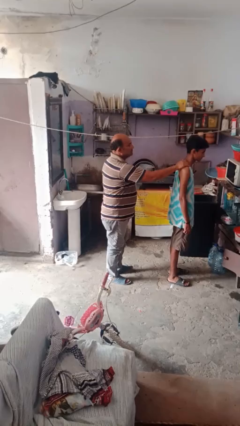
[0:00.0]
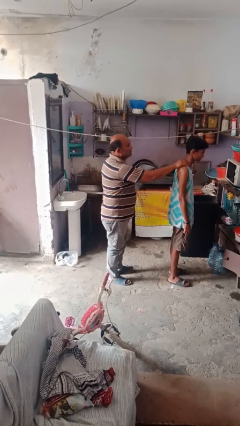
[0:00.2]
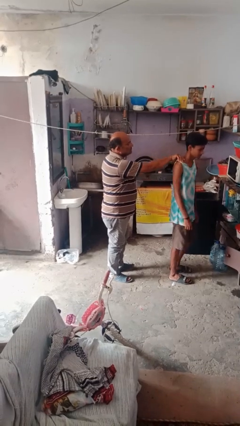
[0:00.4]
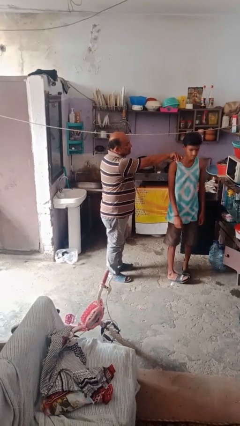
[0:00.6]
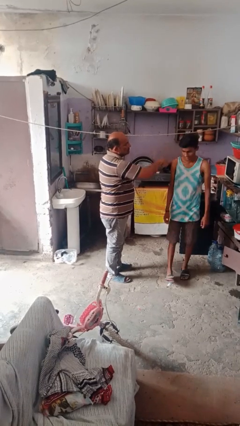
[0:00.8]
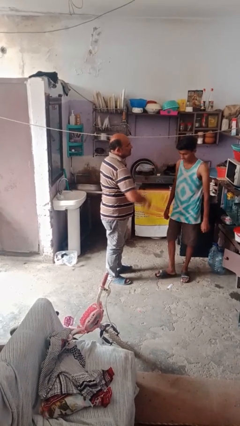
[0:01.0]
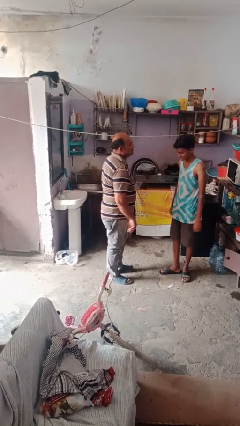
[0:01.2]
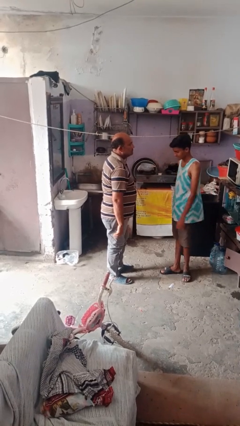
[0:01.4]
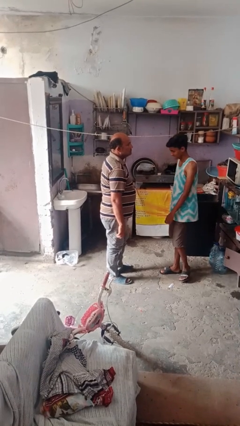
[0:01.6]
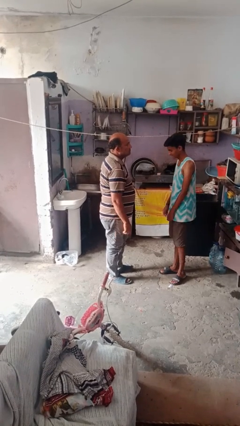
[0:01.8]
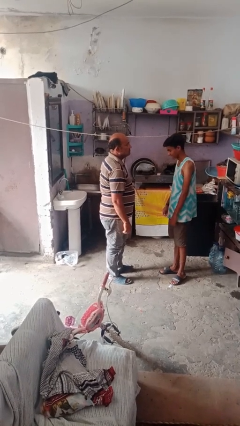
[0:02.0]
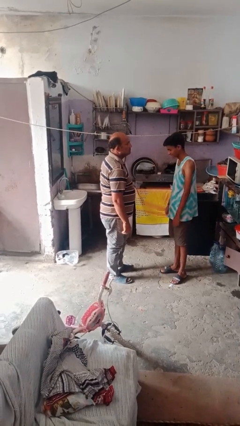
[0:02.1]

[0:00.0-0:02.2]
person spins person around

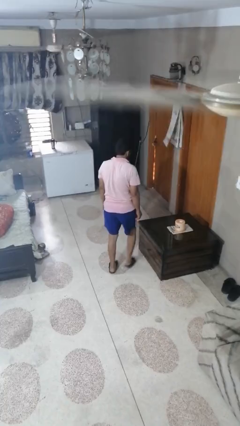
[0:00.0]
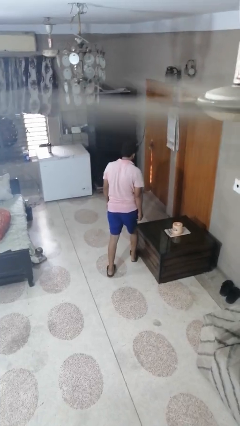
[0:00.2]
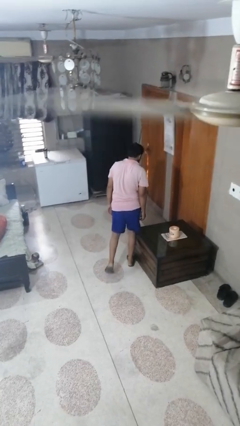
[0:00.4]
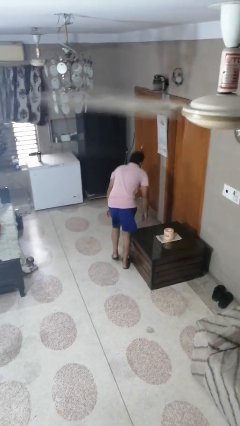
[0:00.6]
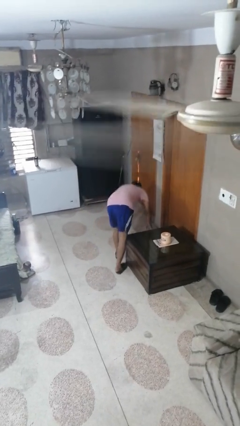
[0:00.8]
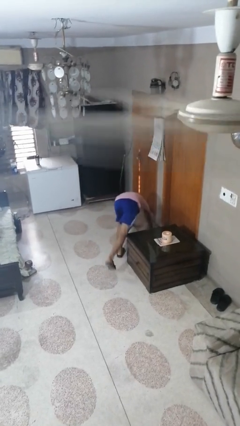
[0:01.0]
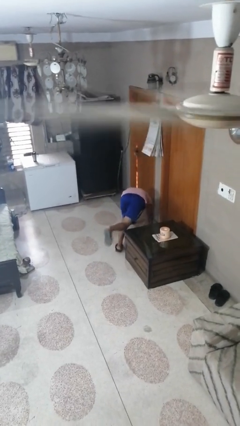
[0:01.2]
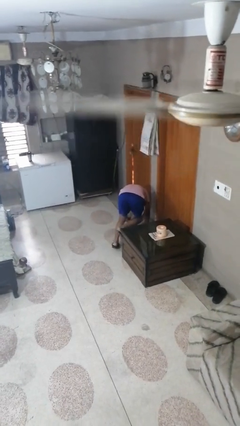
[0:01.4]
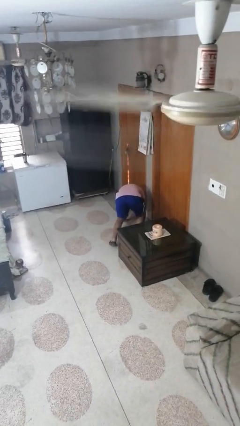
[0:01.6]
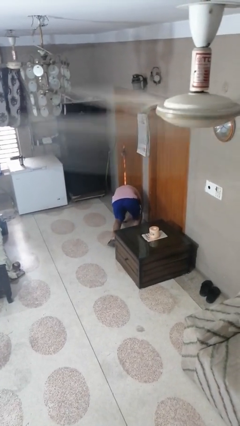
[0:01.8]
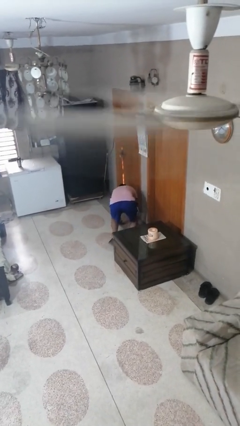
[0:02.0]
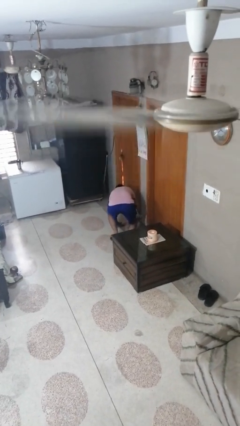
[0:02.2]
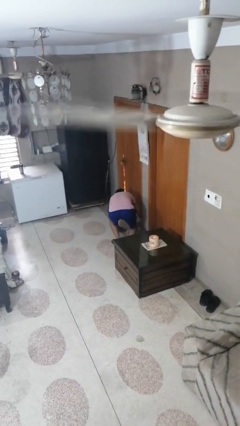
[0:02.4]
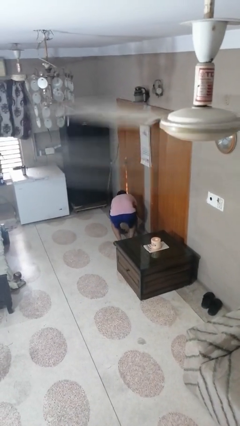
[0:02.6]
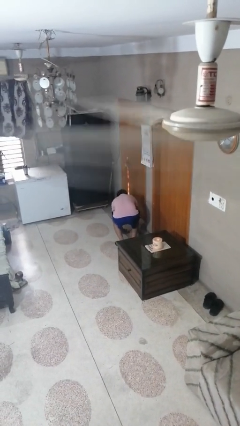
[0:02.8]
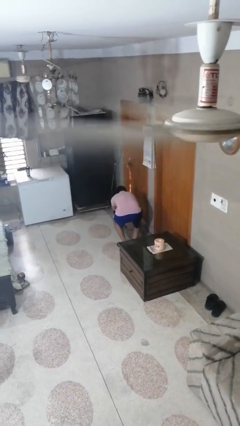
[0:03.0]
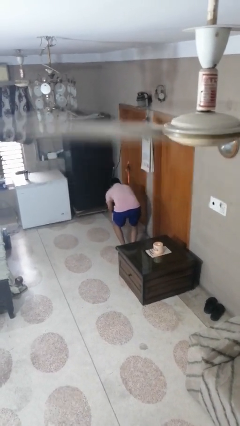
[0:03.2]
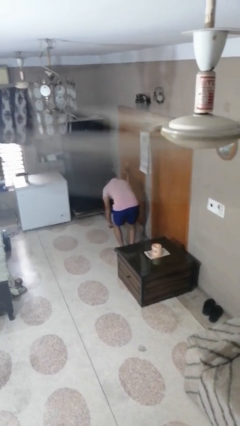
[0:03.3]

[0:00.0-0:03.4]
person bumps into table

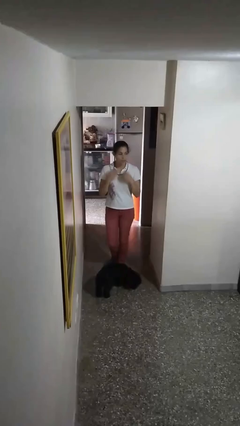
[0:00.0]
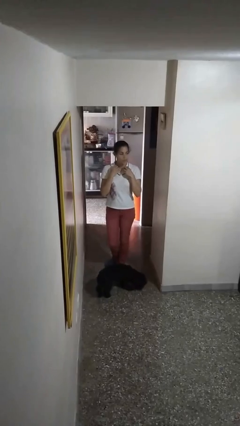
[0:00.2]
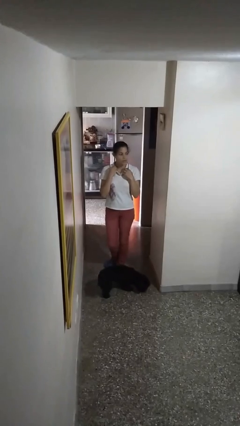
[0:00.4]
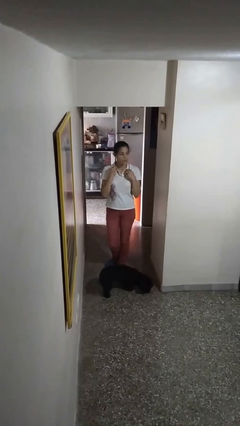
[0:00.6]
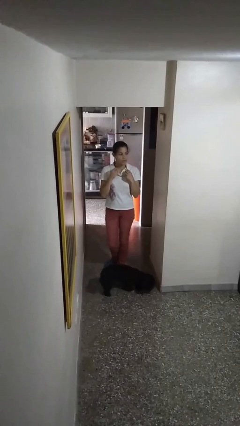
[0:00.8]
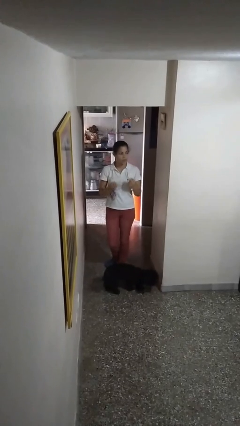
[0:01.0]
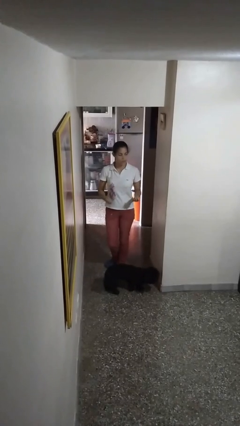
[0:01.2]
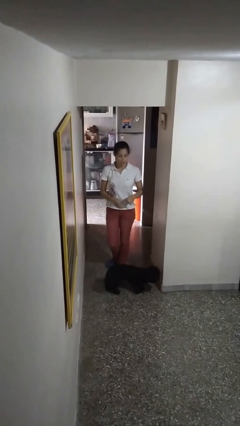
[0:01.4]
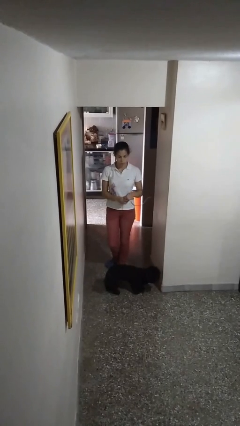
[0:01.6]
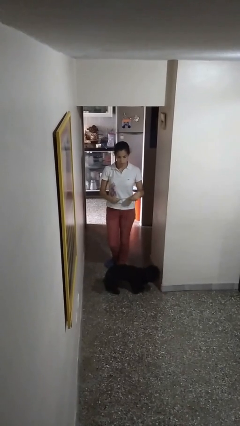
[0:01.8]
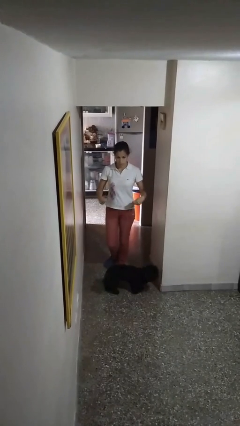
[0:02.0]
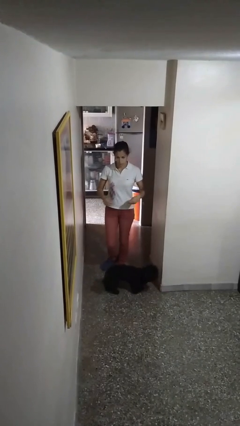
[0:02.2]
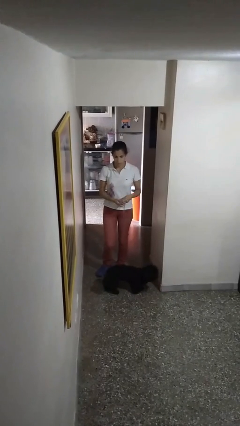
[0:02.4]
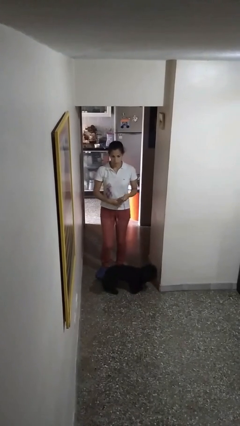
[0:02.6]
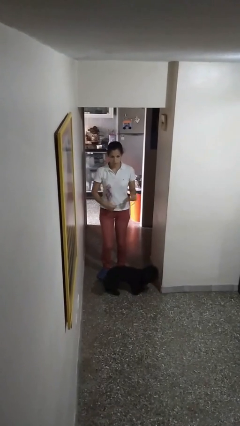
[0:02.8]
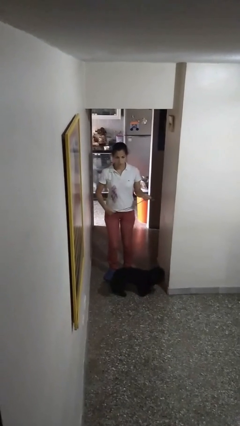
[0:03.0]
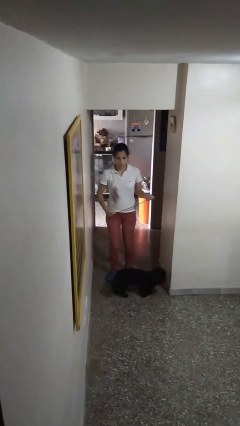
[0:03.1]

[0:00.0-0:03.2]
person takes off necklace

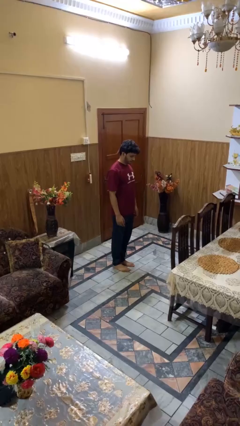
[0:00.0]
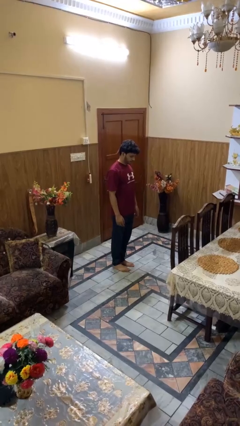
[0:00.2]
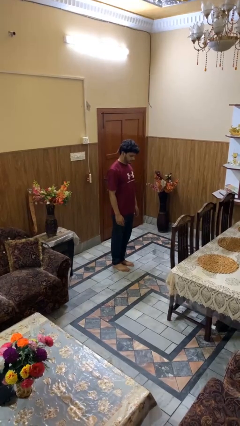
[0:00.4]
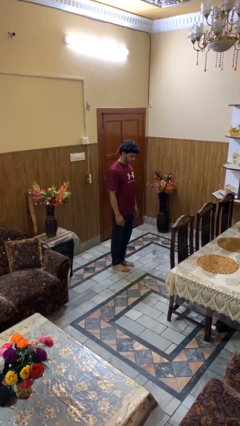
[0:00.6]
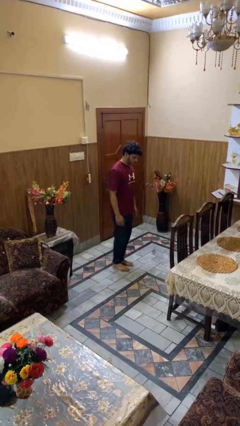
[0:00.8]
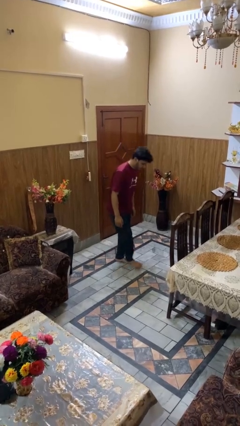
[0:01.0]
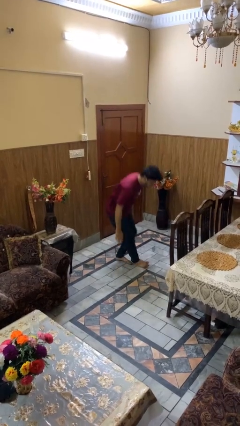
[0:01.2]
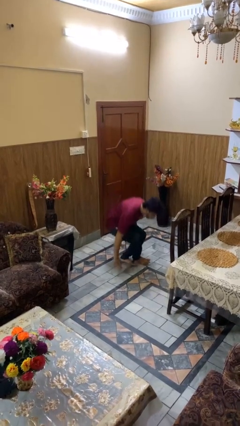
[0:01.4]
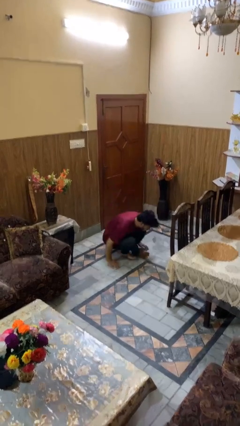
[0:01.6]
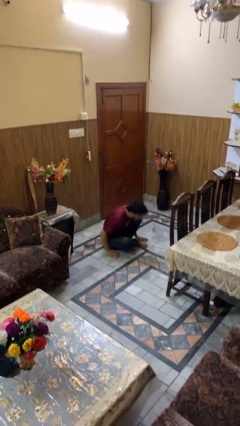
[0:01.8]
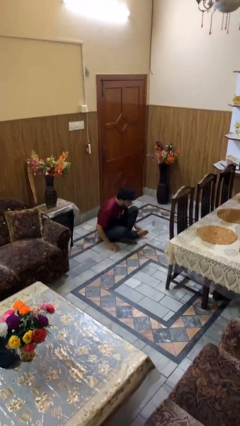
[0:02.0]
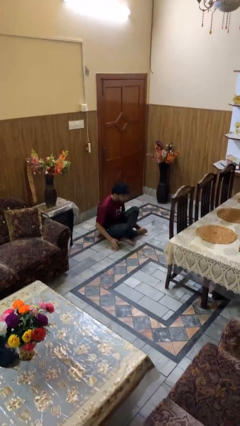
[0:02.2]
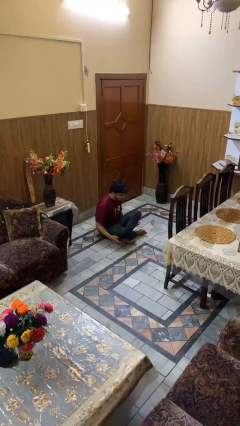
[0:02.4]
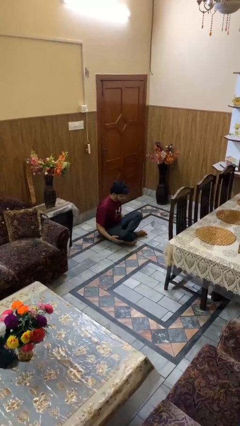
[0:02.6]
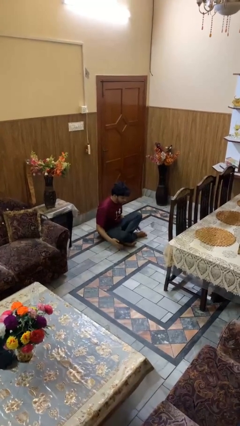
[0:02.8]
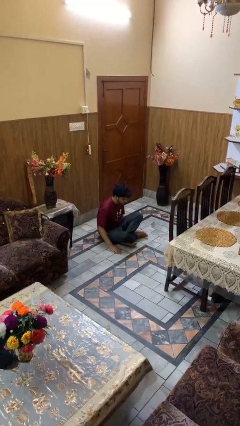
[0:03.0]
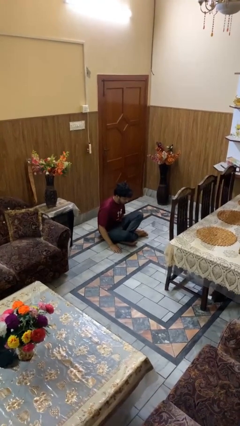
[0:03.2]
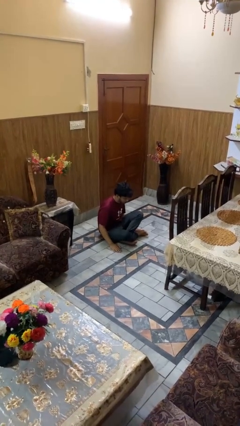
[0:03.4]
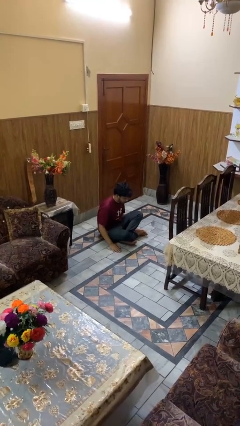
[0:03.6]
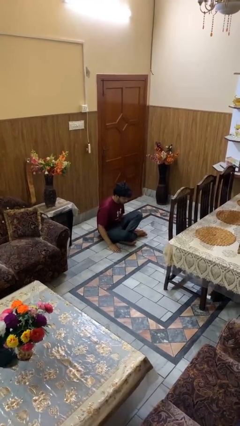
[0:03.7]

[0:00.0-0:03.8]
person sits crisscross

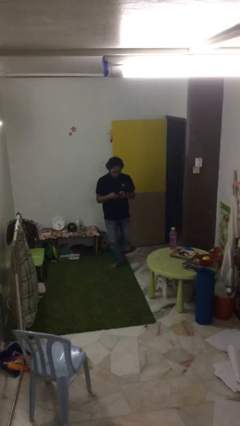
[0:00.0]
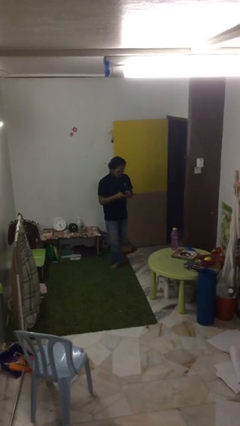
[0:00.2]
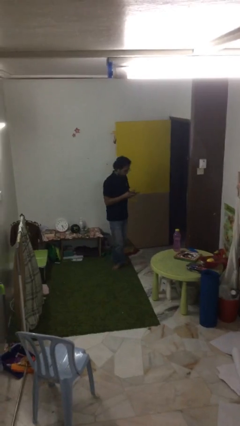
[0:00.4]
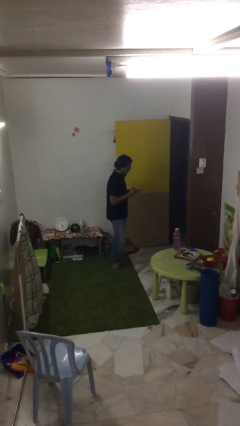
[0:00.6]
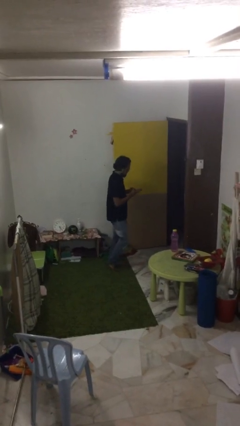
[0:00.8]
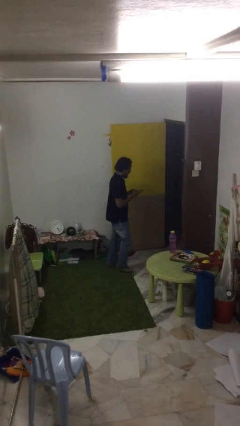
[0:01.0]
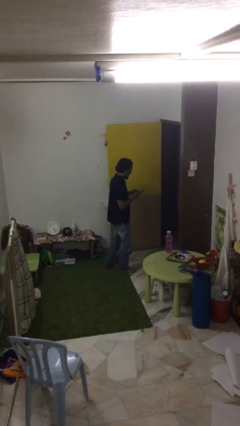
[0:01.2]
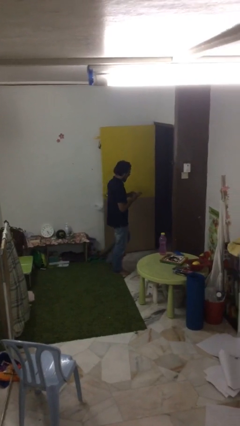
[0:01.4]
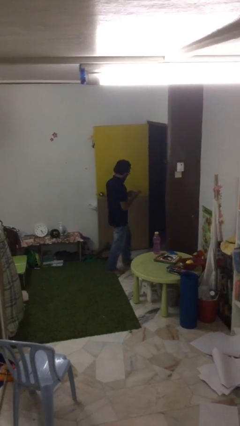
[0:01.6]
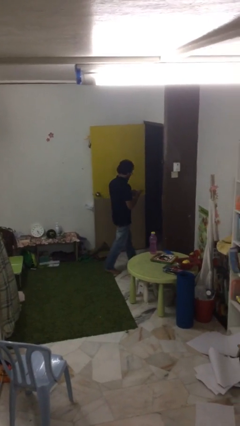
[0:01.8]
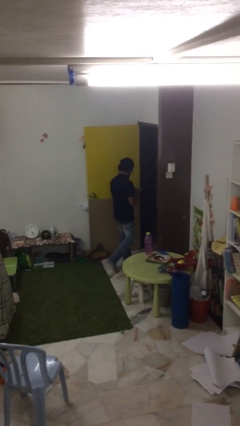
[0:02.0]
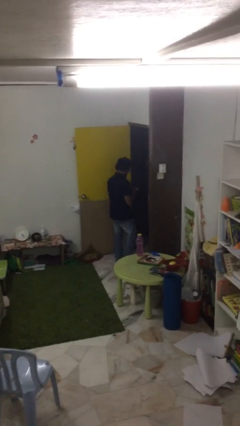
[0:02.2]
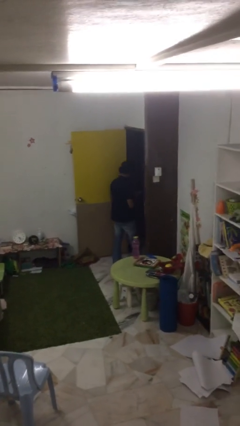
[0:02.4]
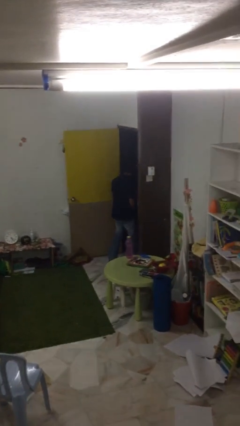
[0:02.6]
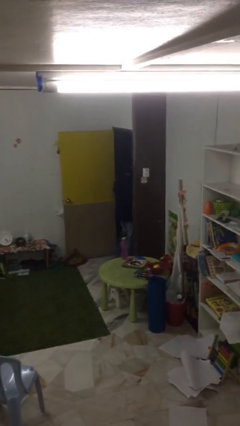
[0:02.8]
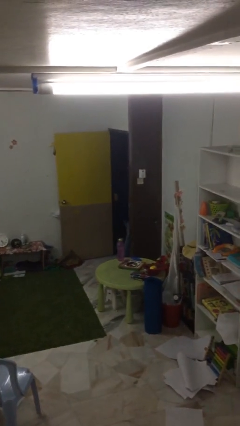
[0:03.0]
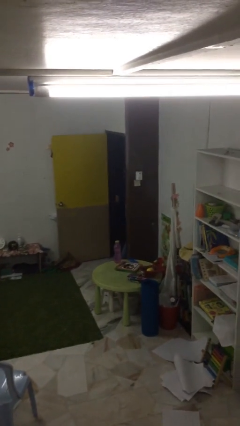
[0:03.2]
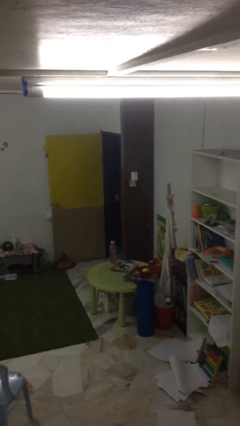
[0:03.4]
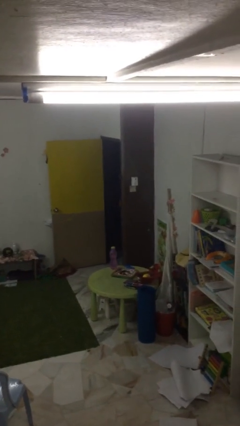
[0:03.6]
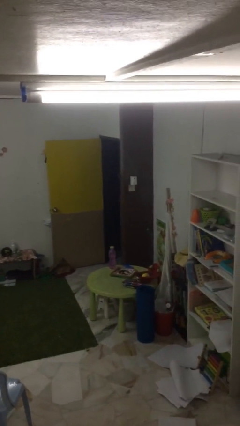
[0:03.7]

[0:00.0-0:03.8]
person exits scene through structure

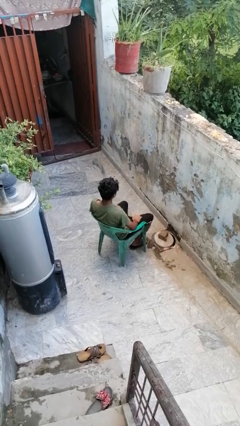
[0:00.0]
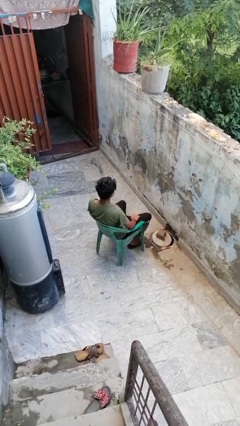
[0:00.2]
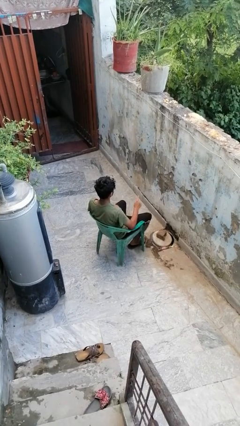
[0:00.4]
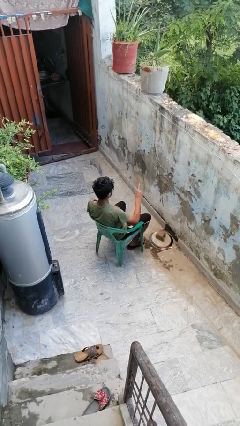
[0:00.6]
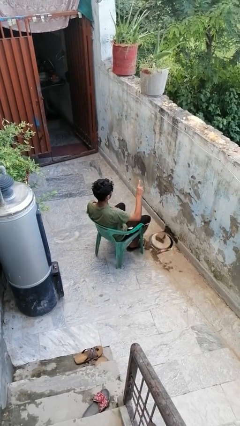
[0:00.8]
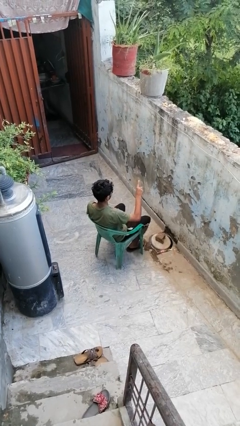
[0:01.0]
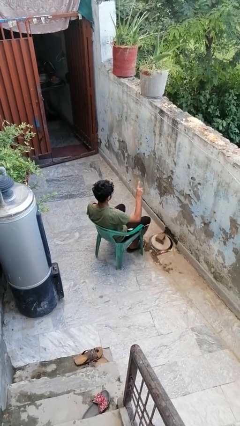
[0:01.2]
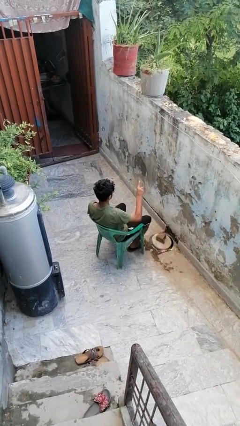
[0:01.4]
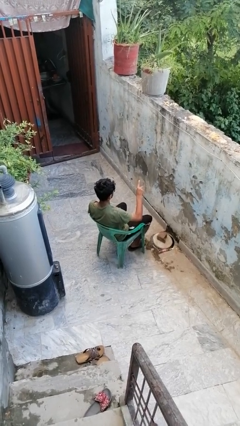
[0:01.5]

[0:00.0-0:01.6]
person gestures number one
